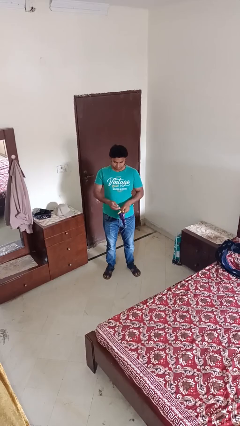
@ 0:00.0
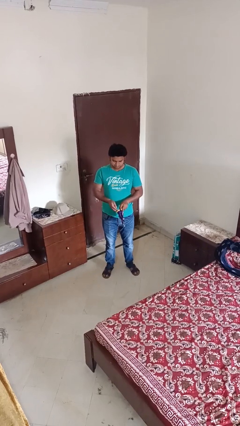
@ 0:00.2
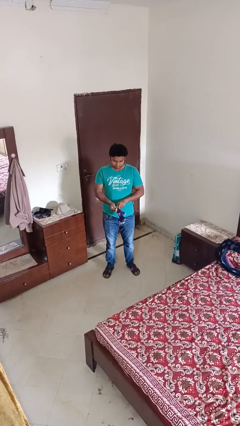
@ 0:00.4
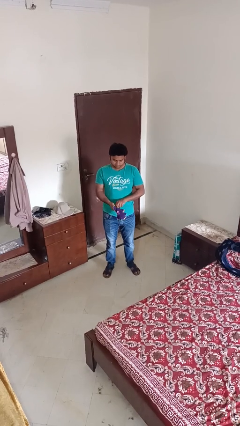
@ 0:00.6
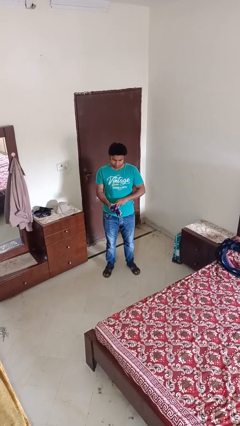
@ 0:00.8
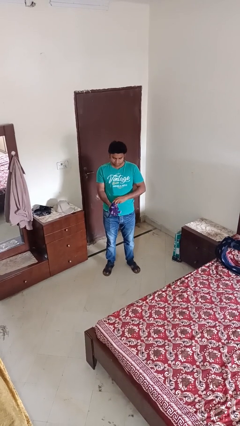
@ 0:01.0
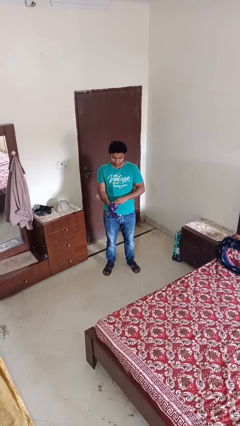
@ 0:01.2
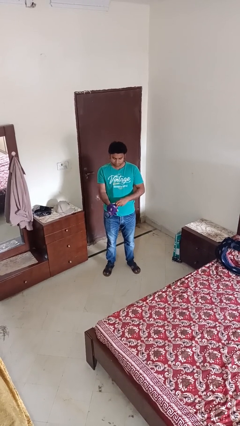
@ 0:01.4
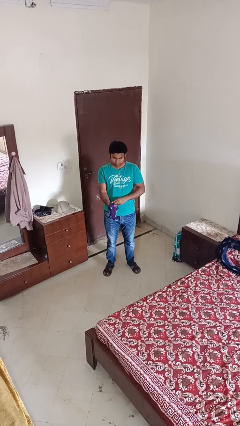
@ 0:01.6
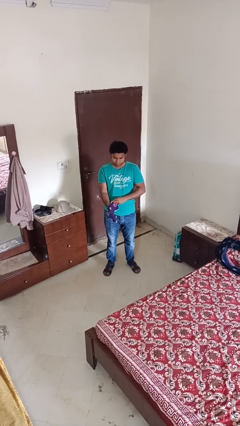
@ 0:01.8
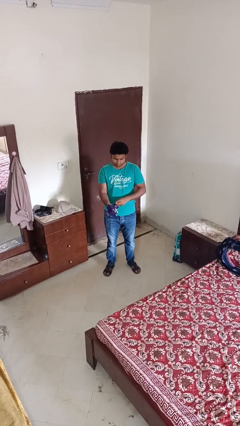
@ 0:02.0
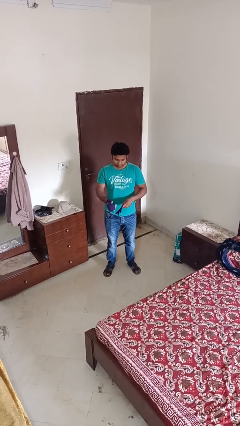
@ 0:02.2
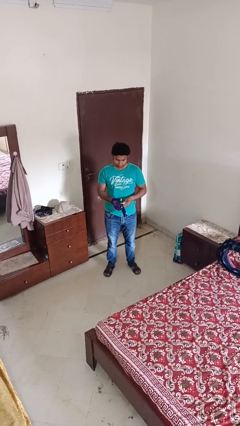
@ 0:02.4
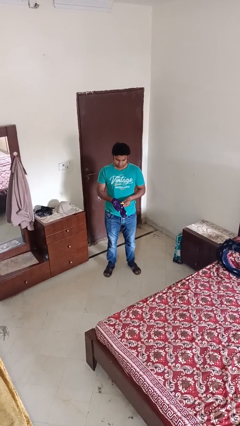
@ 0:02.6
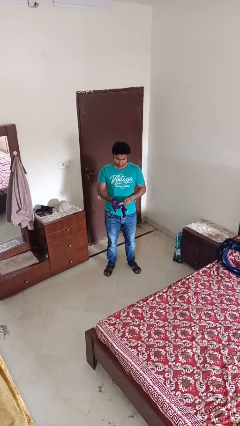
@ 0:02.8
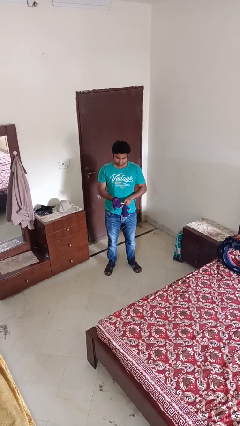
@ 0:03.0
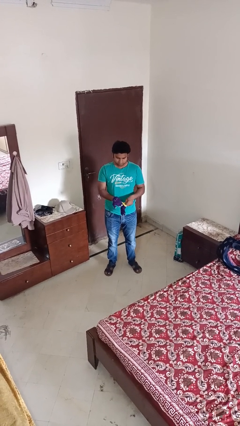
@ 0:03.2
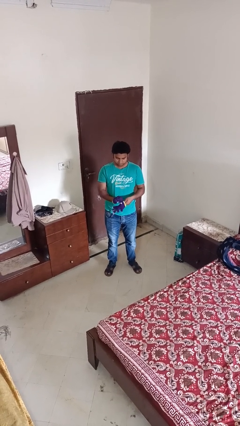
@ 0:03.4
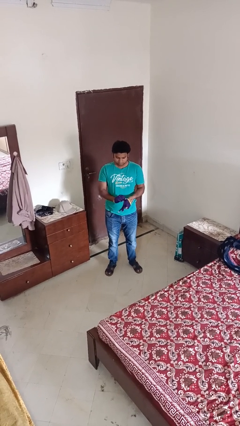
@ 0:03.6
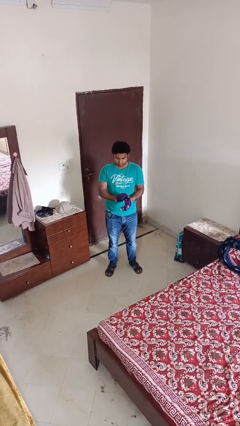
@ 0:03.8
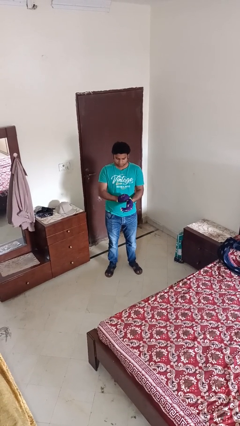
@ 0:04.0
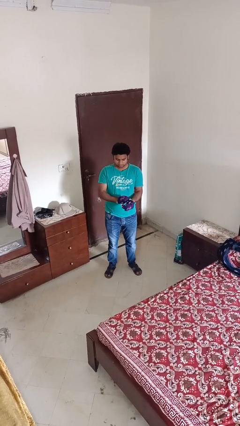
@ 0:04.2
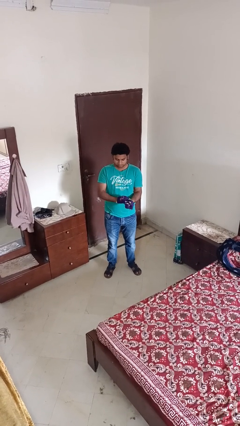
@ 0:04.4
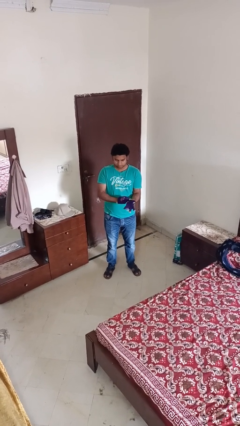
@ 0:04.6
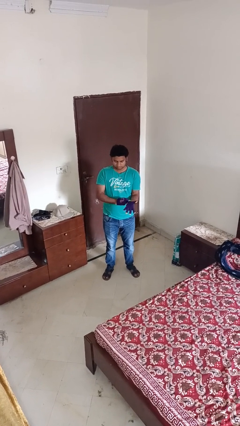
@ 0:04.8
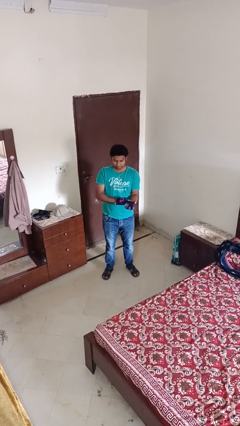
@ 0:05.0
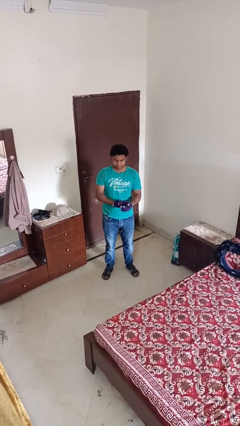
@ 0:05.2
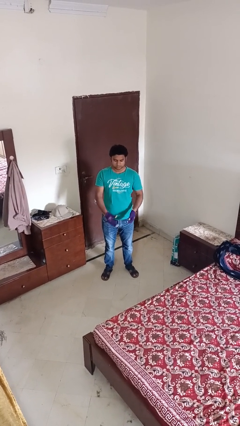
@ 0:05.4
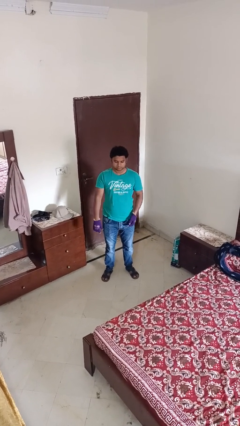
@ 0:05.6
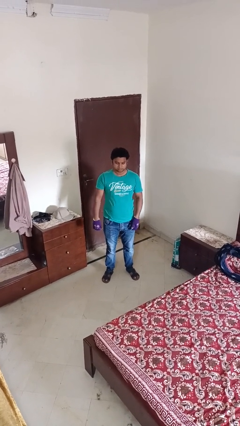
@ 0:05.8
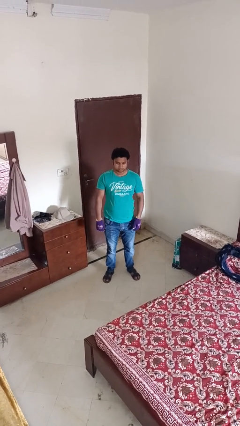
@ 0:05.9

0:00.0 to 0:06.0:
person puts on gloves

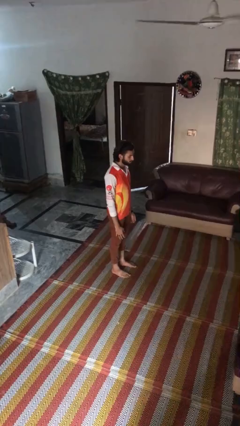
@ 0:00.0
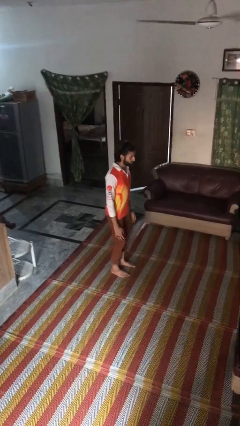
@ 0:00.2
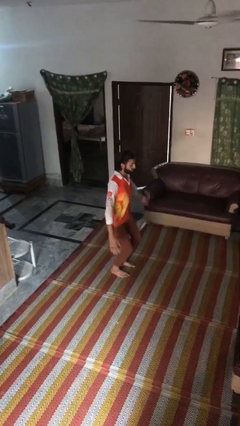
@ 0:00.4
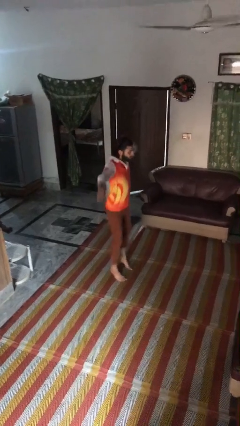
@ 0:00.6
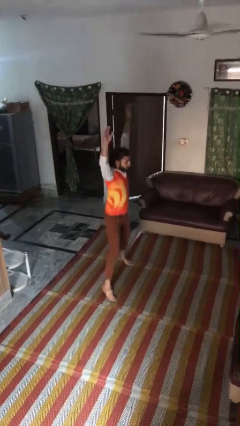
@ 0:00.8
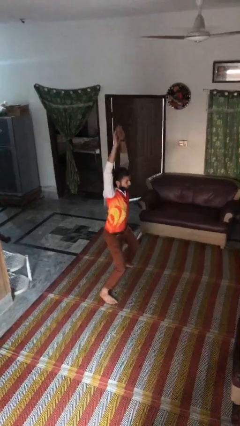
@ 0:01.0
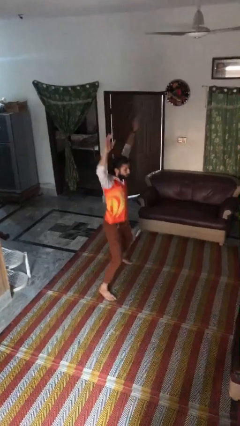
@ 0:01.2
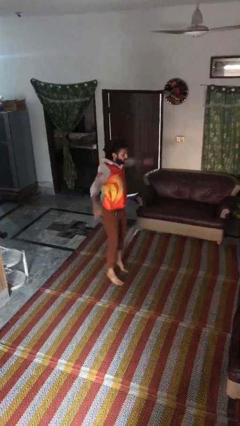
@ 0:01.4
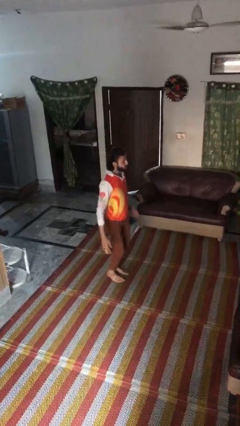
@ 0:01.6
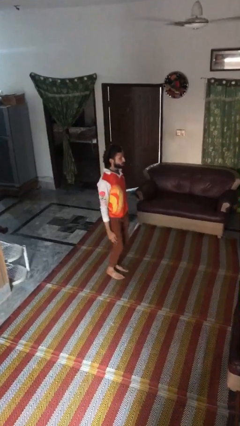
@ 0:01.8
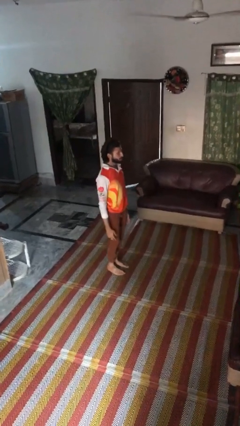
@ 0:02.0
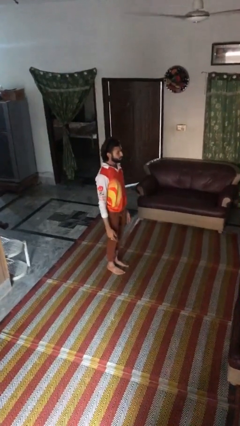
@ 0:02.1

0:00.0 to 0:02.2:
person exercises with jumping jacks

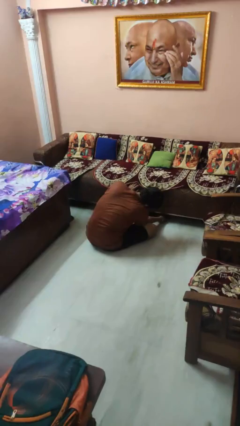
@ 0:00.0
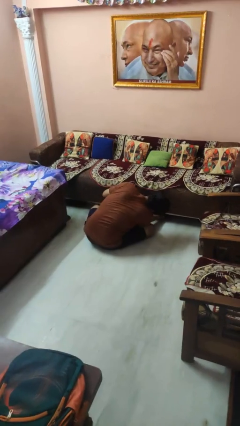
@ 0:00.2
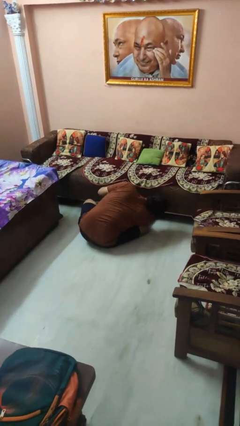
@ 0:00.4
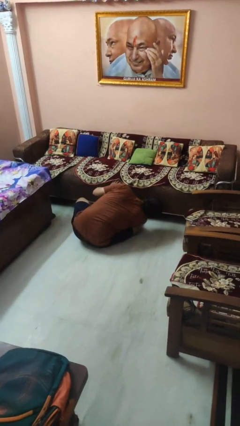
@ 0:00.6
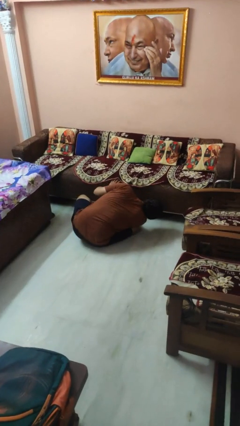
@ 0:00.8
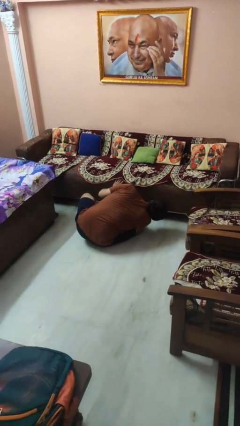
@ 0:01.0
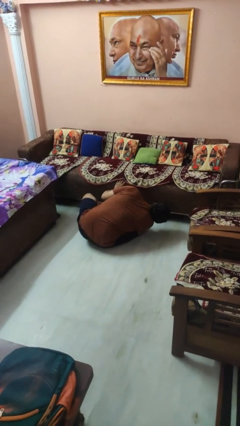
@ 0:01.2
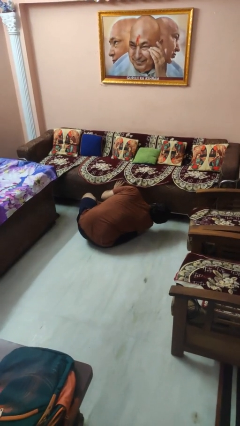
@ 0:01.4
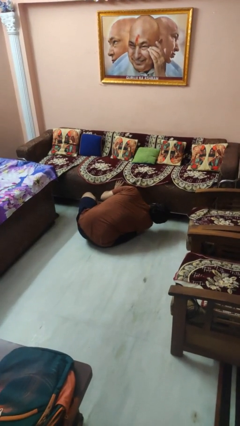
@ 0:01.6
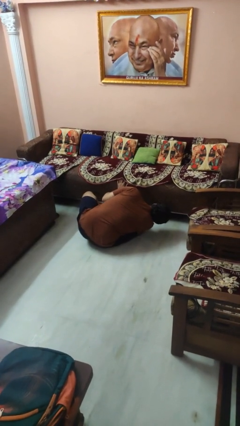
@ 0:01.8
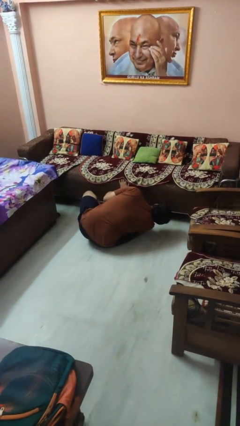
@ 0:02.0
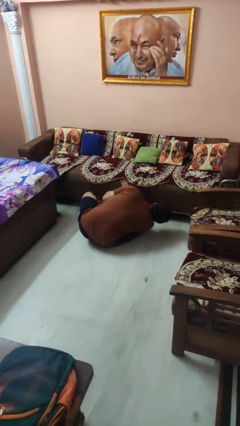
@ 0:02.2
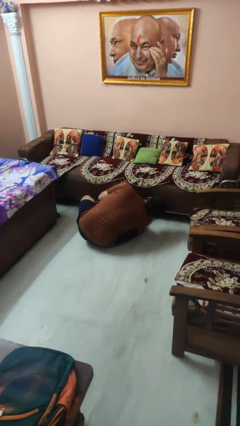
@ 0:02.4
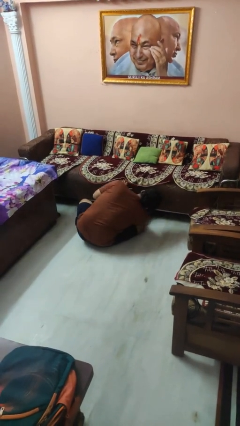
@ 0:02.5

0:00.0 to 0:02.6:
person searches under couch

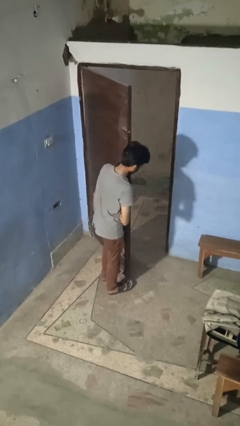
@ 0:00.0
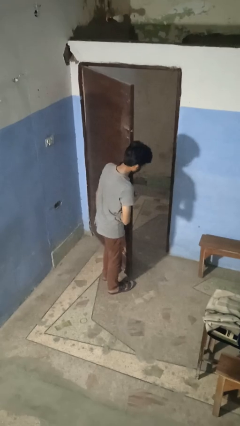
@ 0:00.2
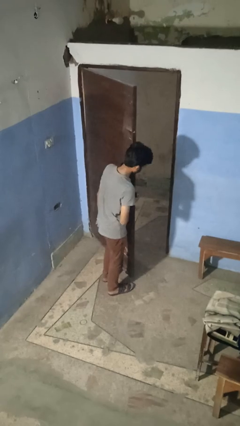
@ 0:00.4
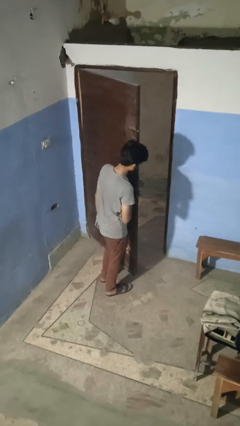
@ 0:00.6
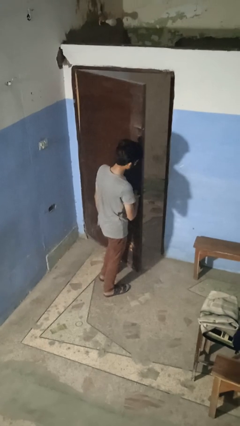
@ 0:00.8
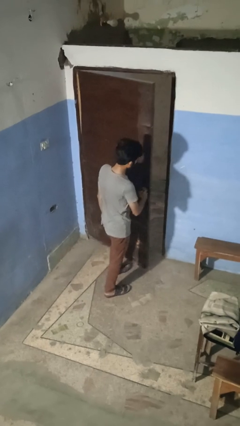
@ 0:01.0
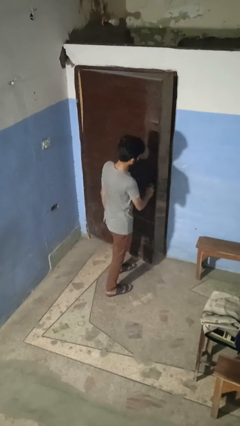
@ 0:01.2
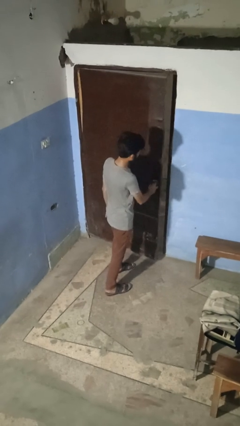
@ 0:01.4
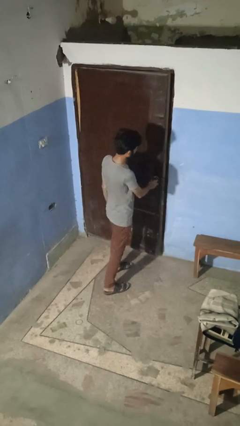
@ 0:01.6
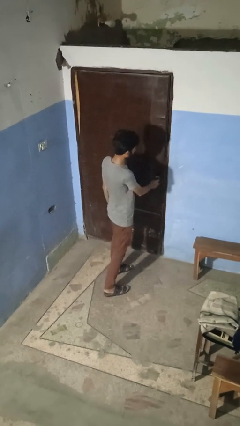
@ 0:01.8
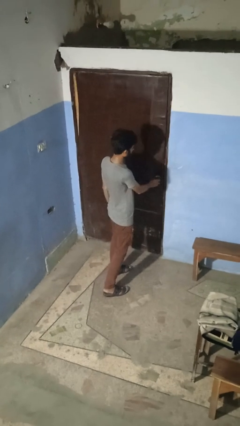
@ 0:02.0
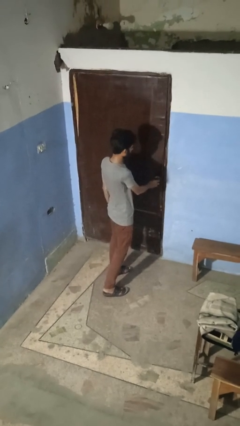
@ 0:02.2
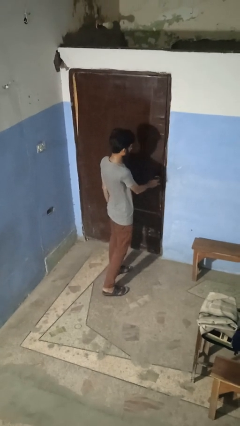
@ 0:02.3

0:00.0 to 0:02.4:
person closes facility door

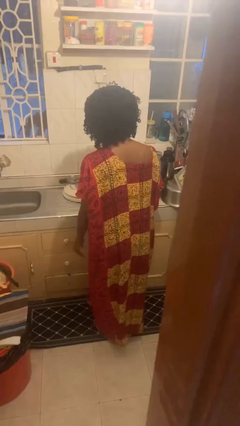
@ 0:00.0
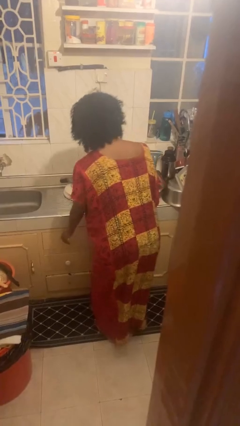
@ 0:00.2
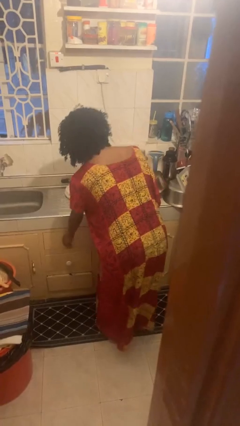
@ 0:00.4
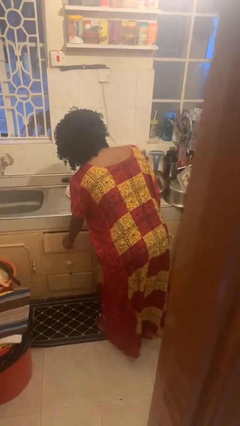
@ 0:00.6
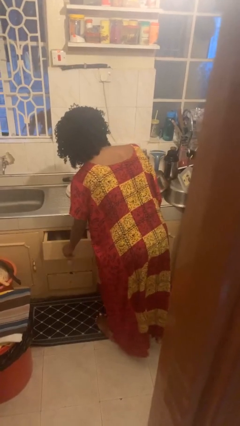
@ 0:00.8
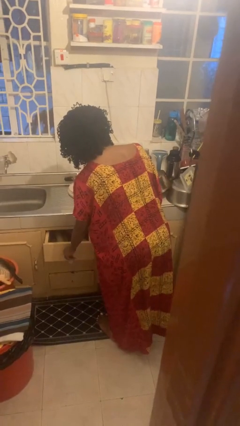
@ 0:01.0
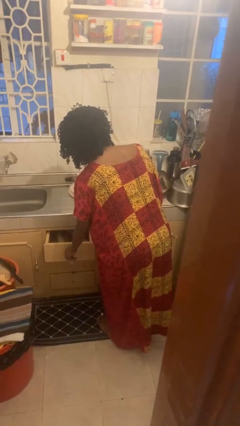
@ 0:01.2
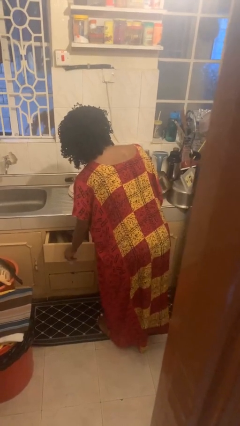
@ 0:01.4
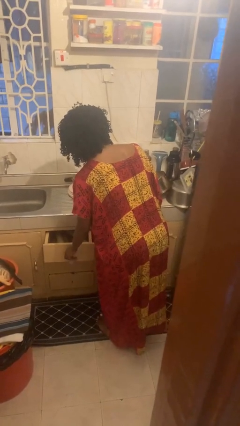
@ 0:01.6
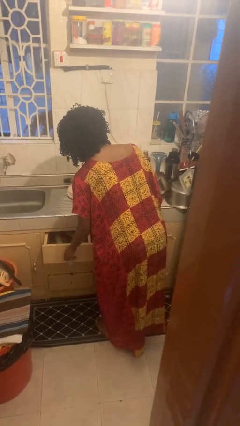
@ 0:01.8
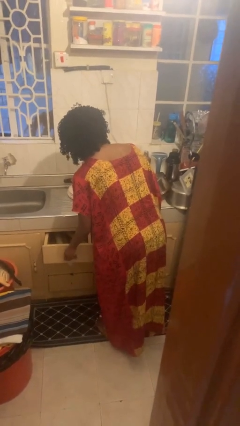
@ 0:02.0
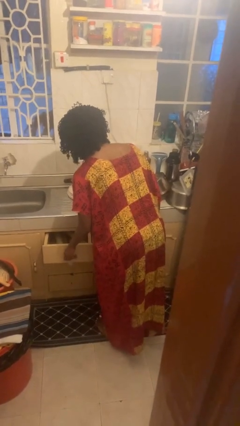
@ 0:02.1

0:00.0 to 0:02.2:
person opens kitchen drawer

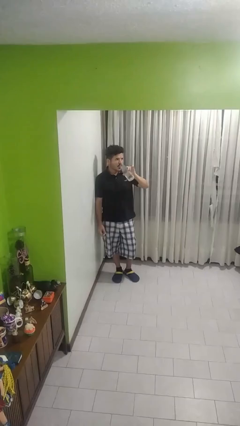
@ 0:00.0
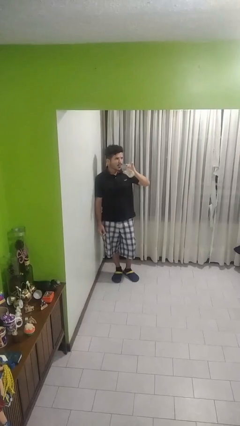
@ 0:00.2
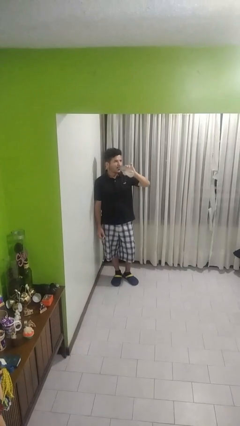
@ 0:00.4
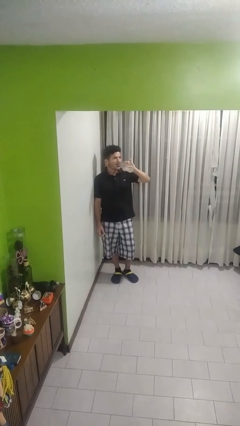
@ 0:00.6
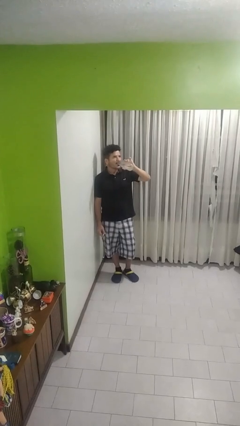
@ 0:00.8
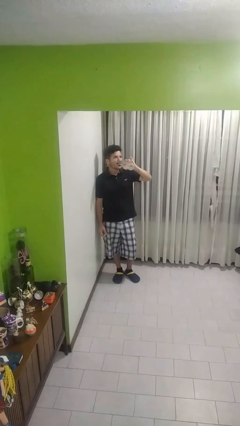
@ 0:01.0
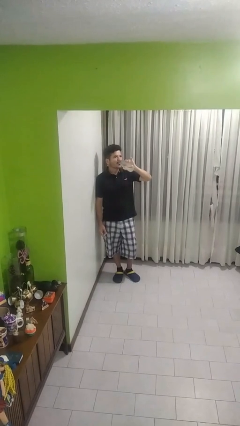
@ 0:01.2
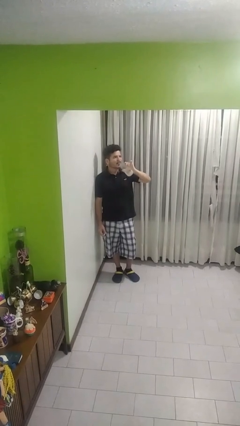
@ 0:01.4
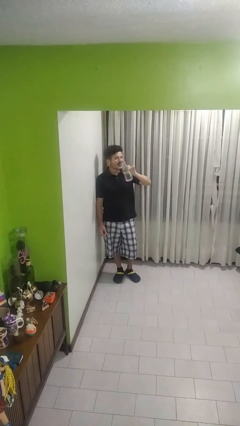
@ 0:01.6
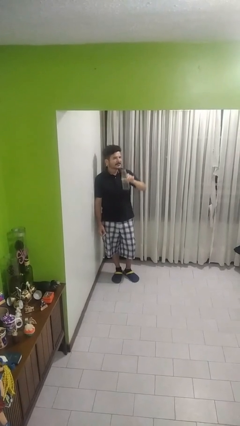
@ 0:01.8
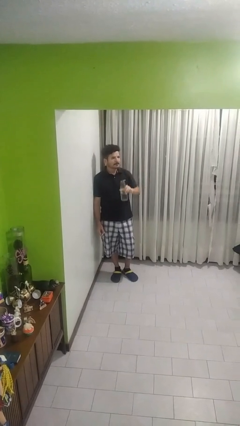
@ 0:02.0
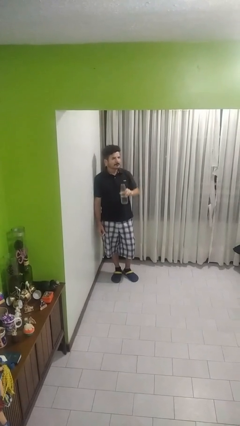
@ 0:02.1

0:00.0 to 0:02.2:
person drinks from bottle
